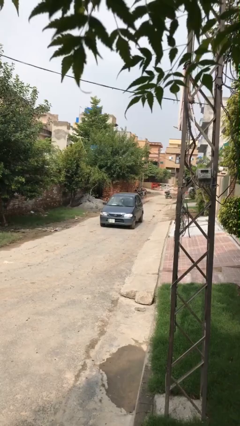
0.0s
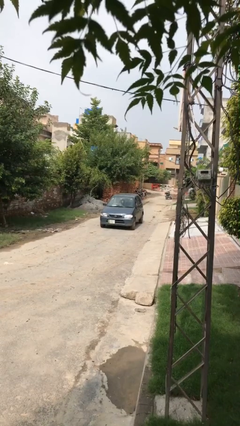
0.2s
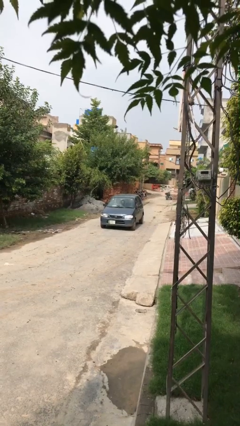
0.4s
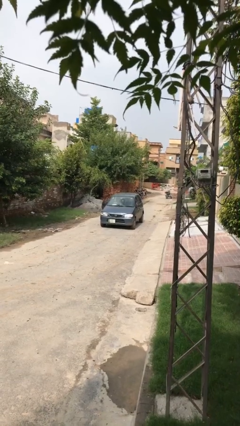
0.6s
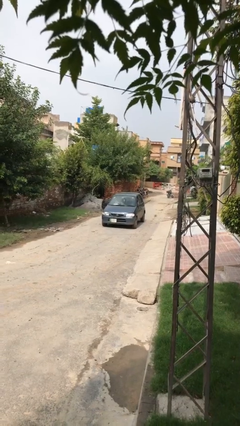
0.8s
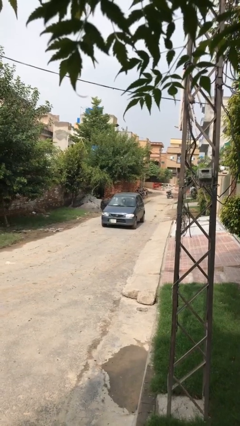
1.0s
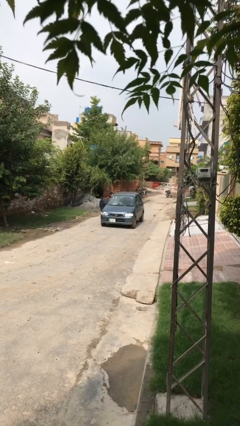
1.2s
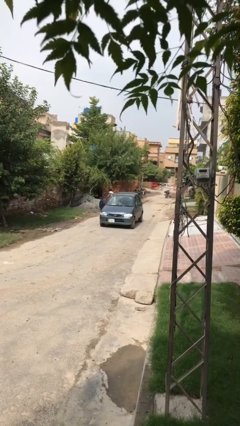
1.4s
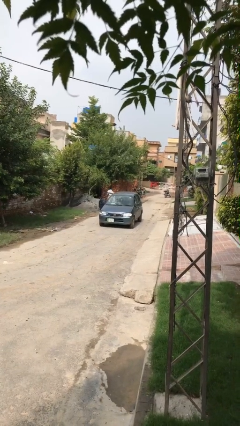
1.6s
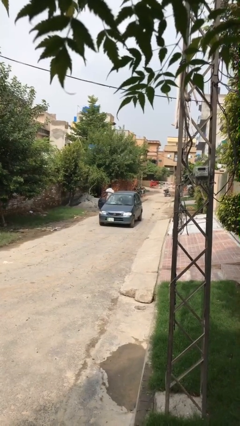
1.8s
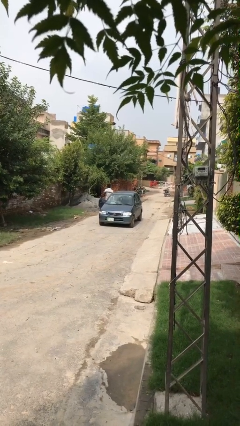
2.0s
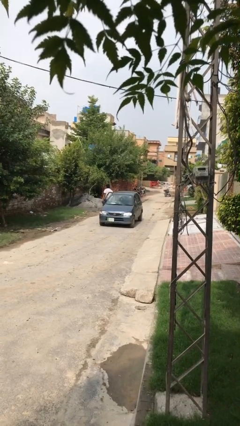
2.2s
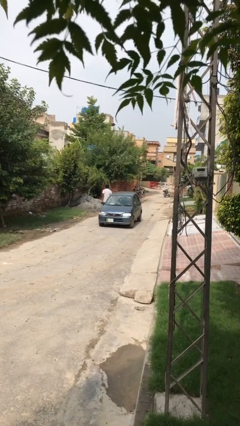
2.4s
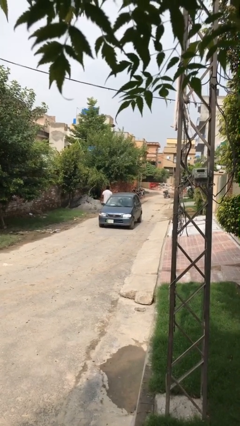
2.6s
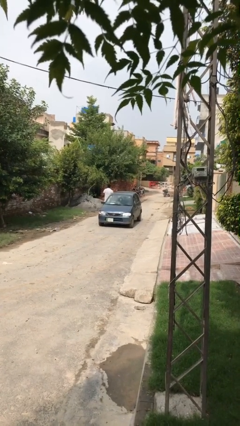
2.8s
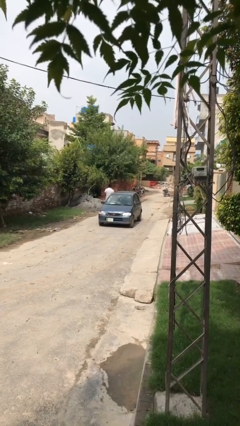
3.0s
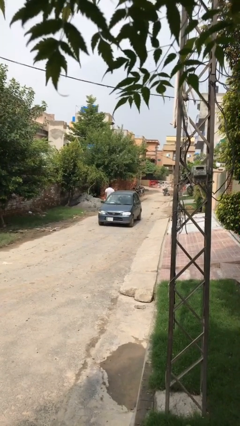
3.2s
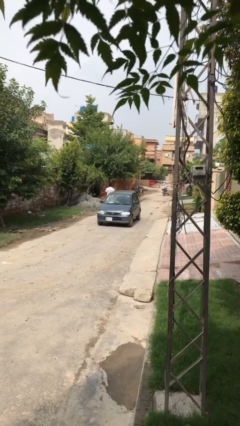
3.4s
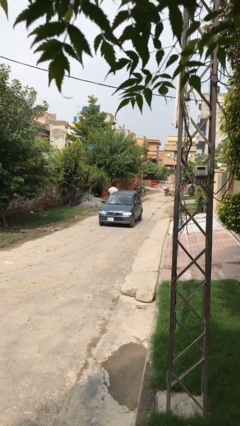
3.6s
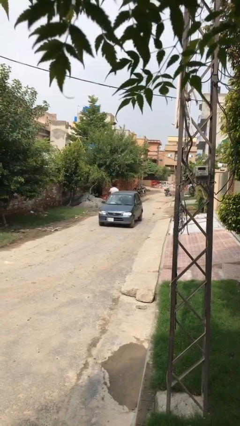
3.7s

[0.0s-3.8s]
car drops off person

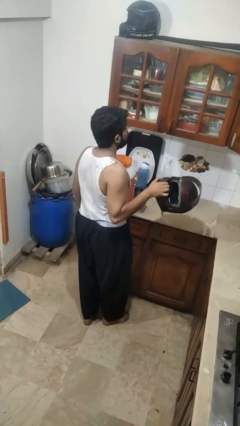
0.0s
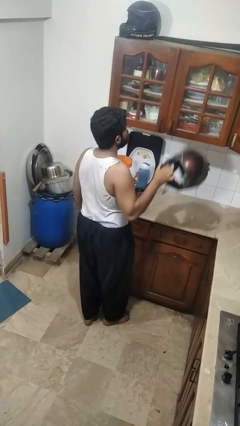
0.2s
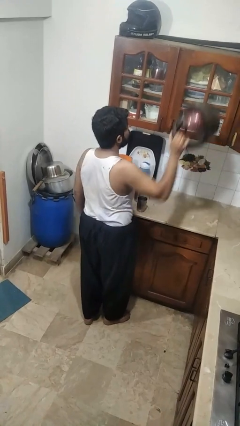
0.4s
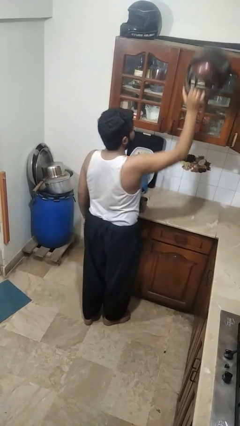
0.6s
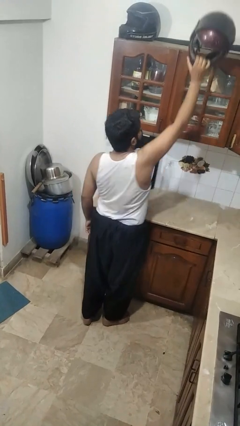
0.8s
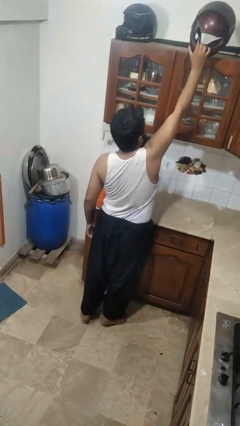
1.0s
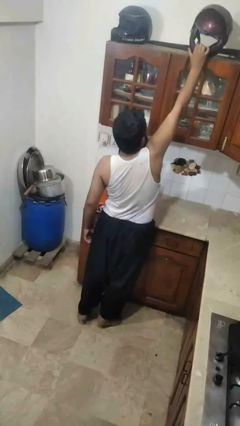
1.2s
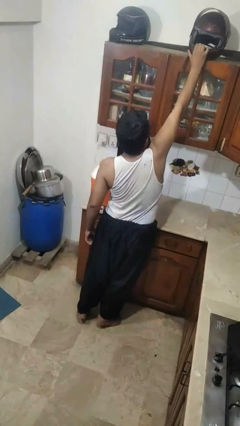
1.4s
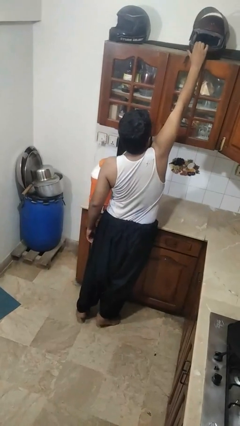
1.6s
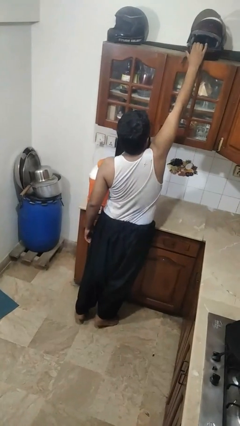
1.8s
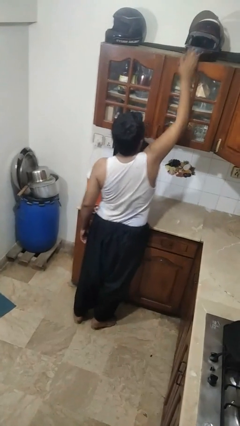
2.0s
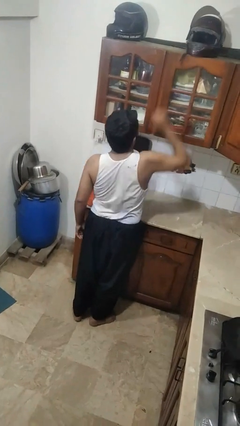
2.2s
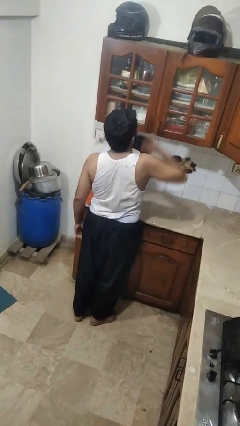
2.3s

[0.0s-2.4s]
person puts down object on shelf

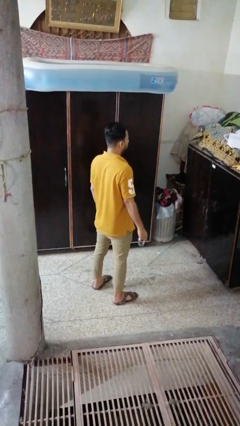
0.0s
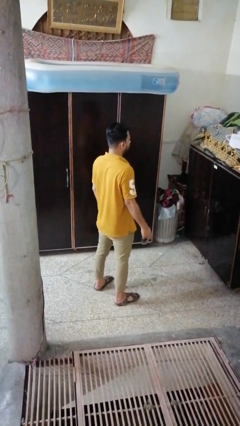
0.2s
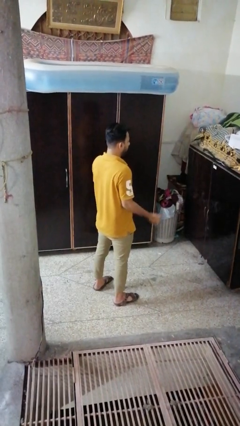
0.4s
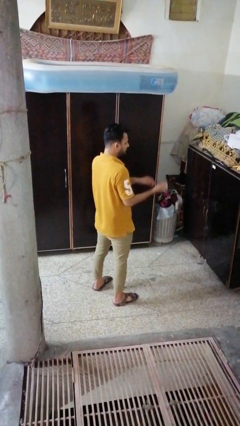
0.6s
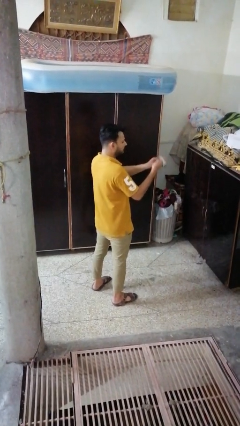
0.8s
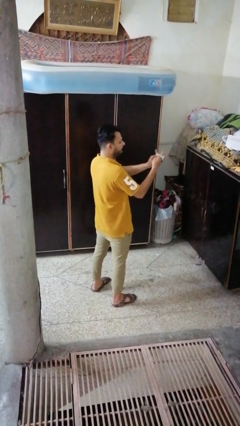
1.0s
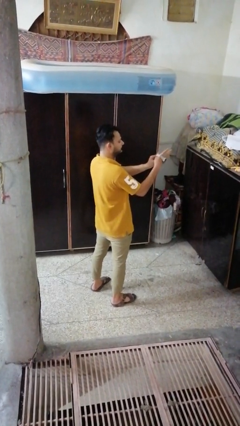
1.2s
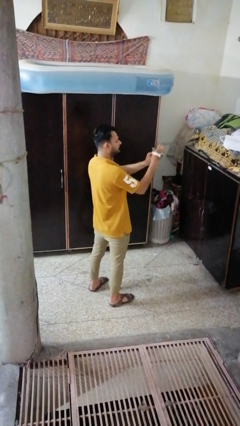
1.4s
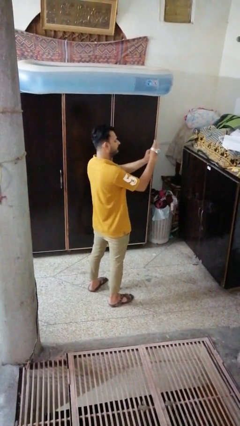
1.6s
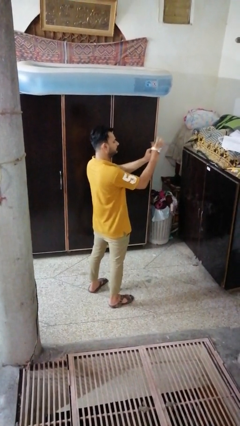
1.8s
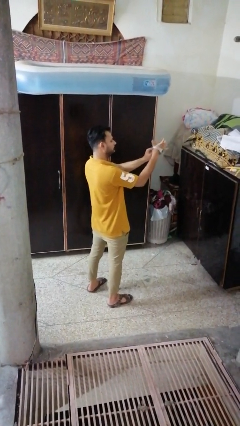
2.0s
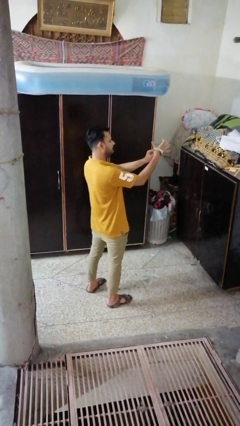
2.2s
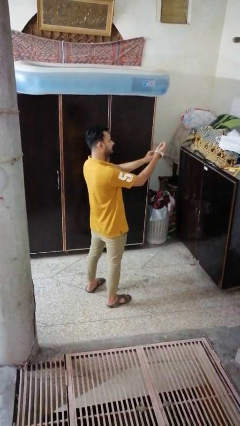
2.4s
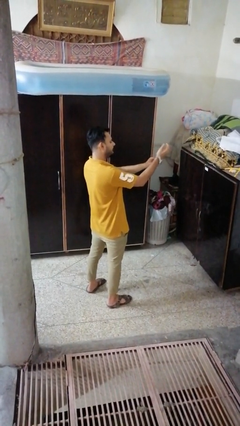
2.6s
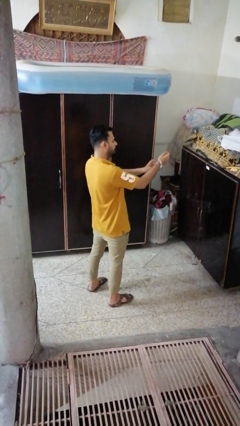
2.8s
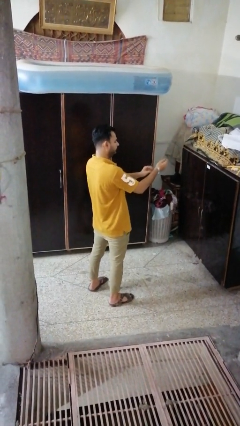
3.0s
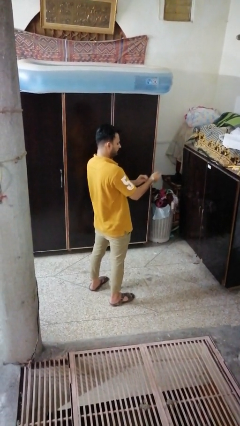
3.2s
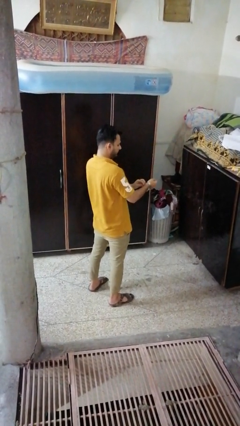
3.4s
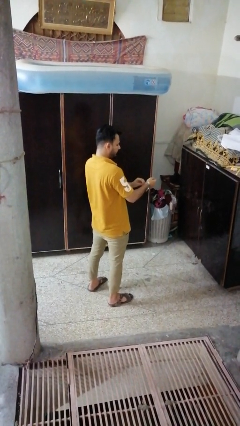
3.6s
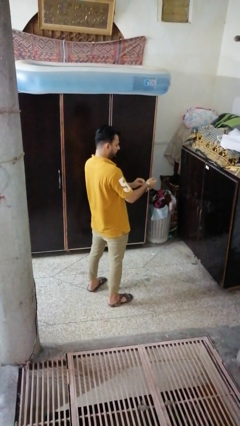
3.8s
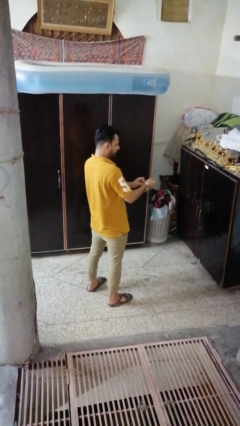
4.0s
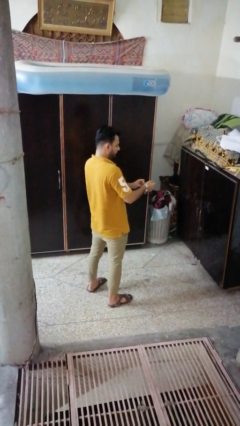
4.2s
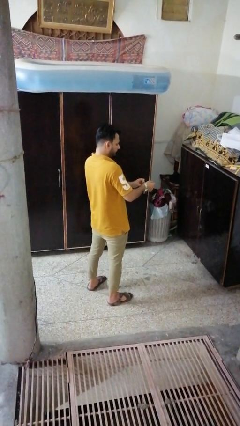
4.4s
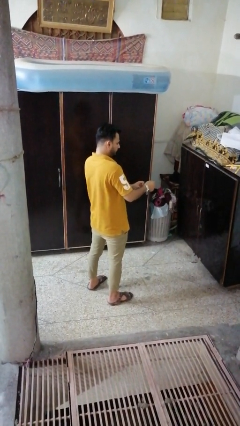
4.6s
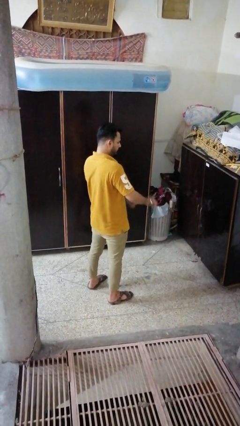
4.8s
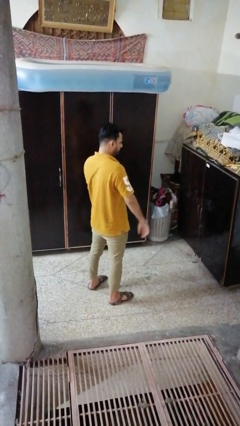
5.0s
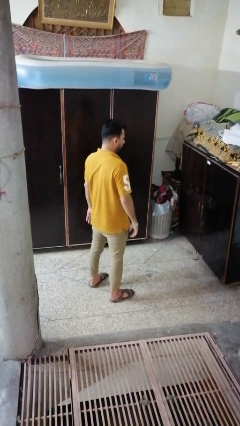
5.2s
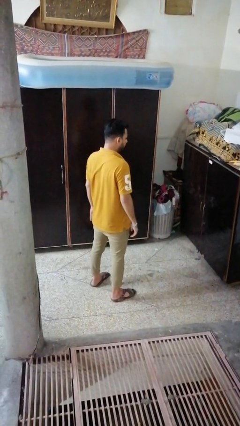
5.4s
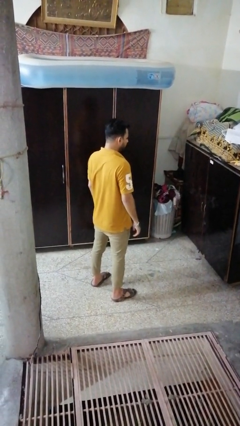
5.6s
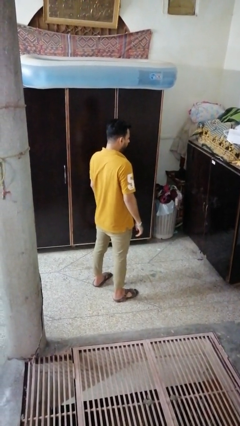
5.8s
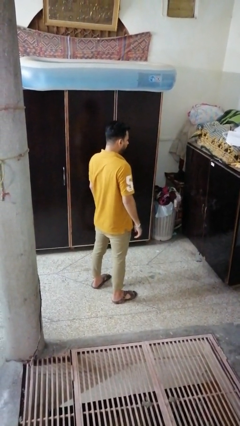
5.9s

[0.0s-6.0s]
person puts on wristwatch

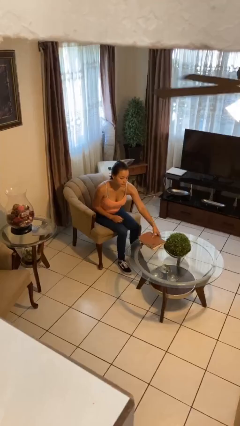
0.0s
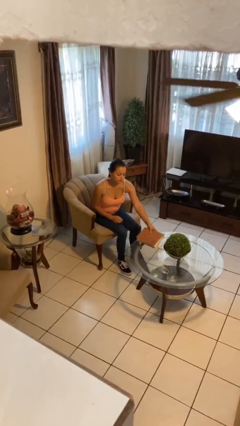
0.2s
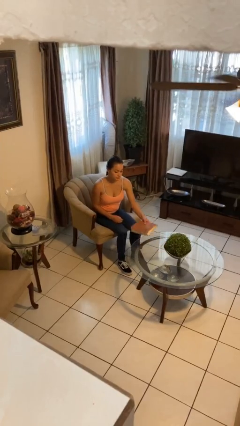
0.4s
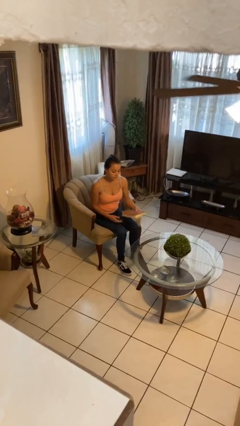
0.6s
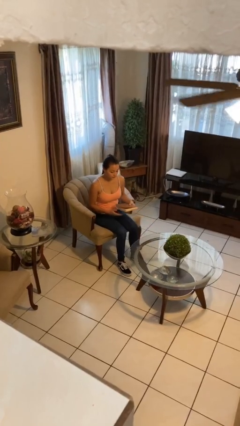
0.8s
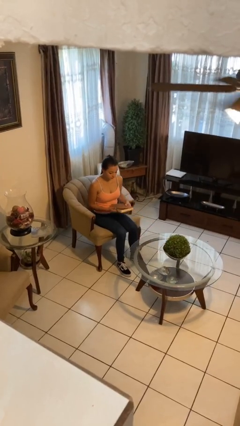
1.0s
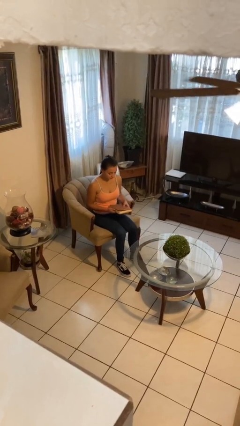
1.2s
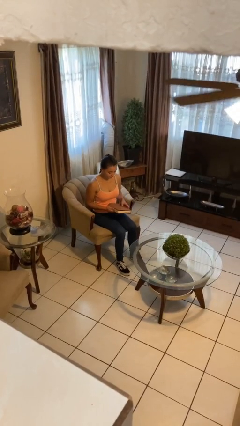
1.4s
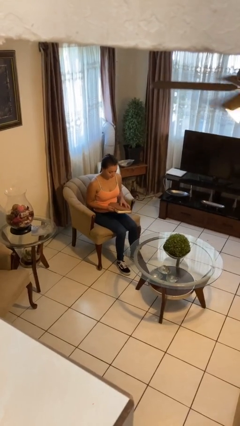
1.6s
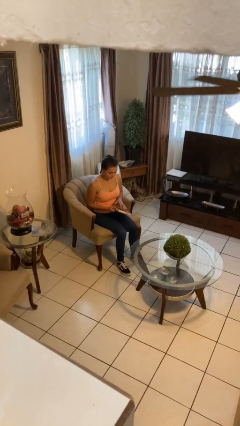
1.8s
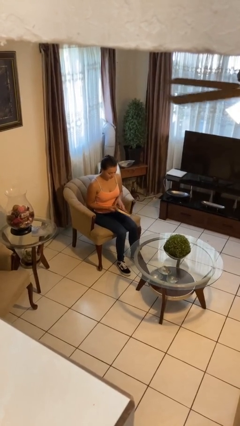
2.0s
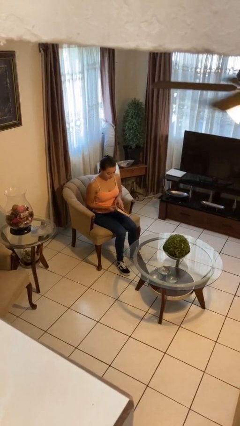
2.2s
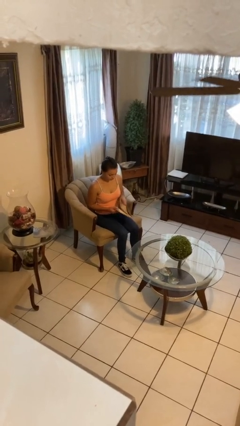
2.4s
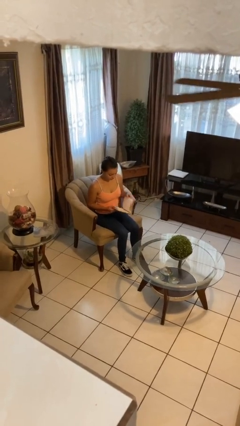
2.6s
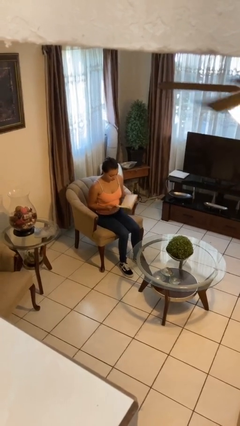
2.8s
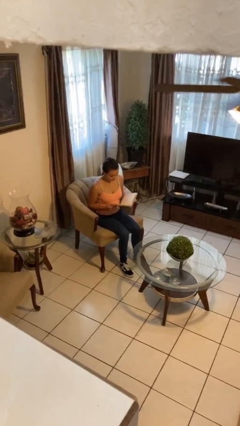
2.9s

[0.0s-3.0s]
person picks up object from table

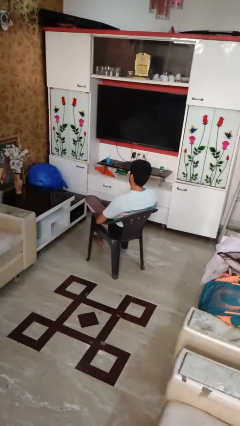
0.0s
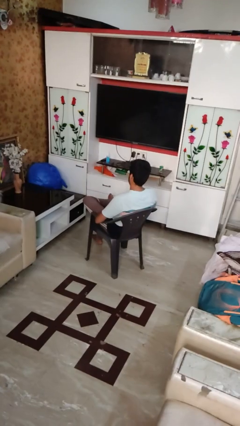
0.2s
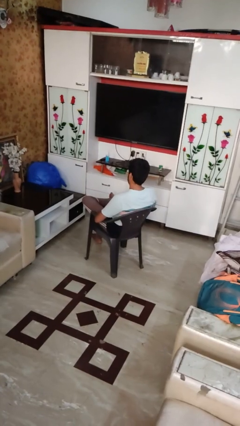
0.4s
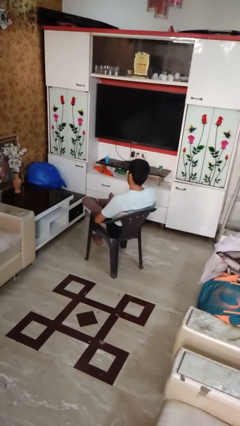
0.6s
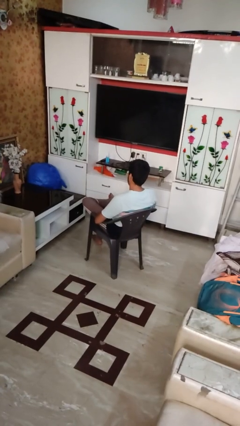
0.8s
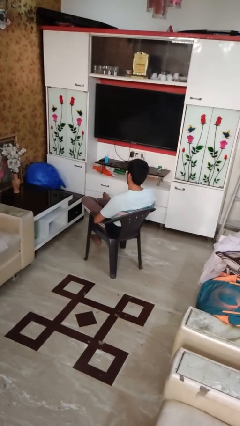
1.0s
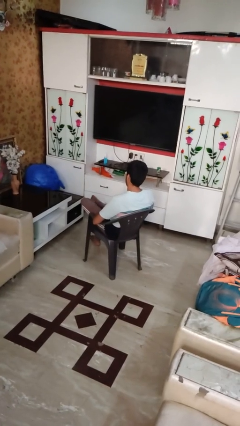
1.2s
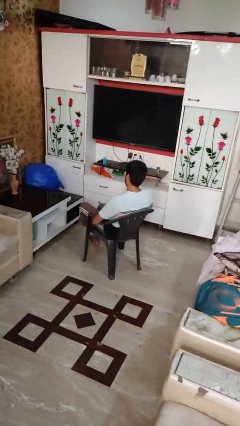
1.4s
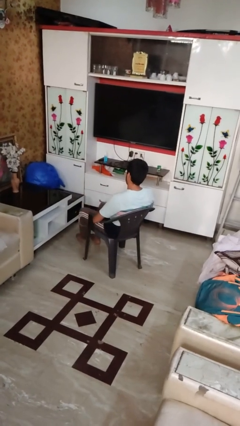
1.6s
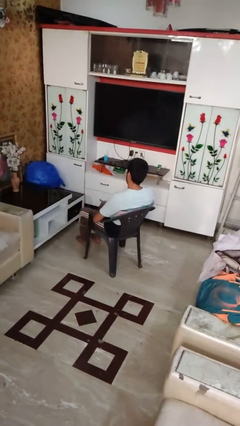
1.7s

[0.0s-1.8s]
person crosses legs

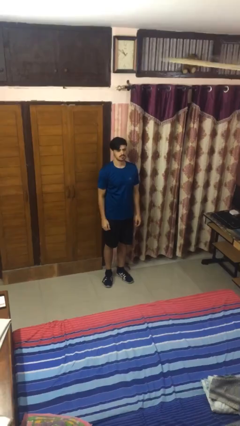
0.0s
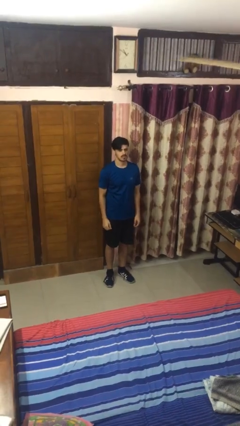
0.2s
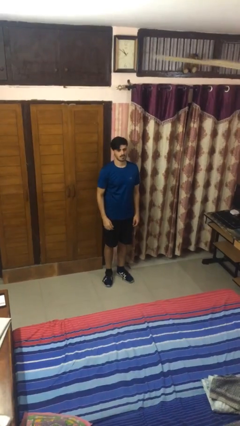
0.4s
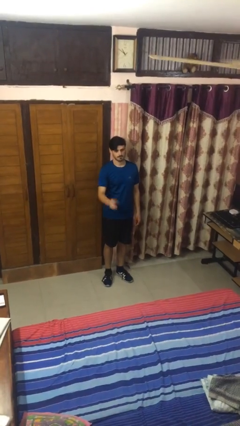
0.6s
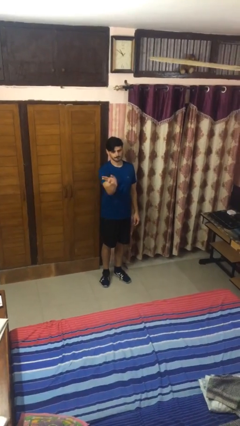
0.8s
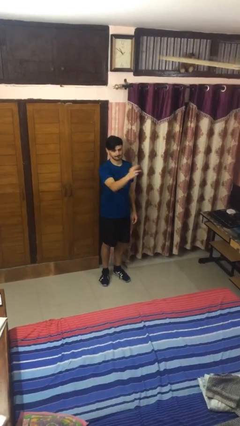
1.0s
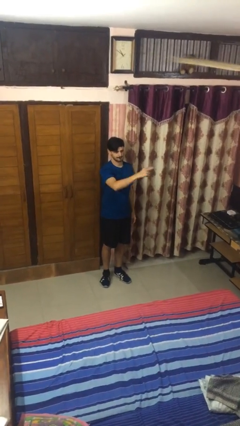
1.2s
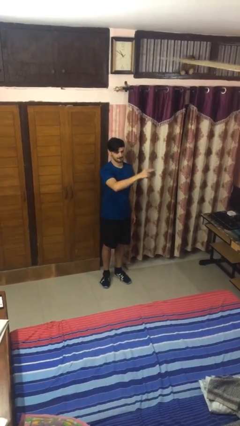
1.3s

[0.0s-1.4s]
person gestures swipe left
